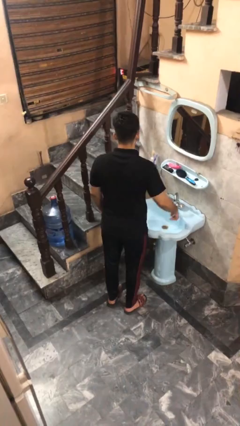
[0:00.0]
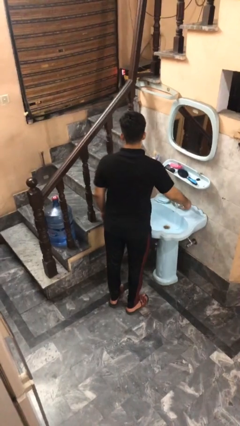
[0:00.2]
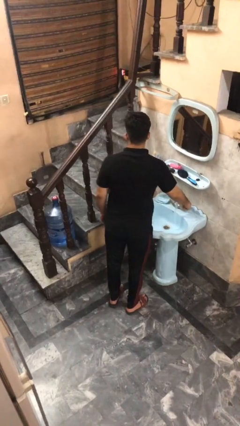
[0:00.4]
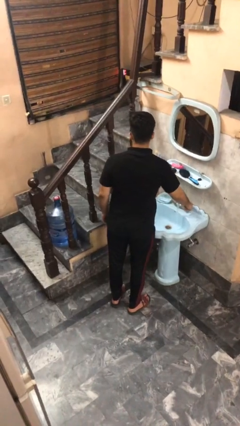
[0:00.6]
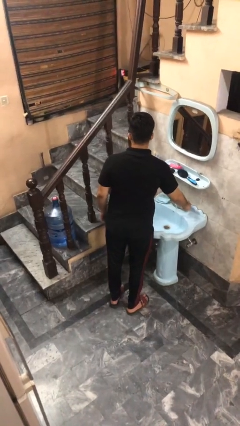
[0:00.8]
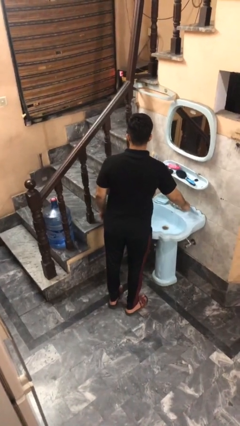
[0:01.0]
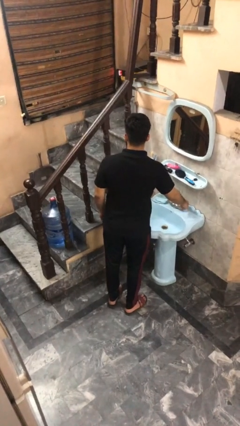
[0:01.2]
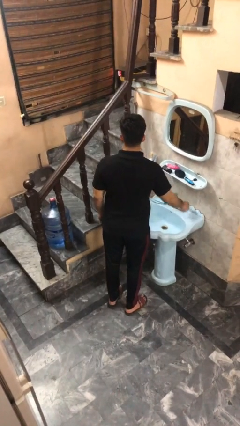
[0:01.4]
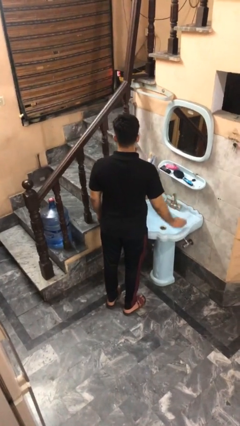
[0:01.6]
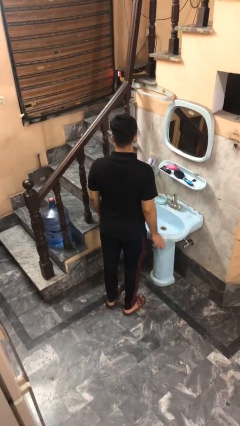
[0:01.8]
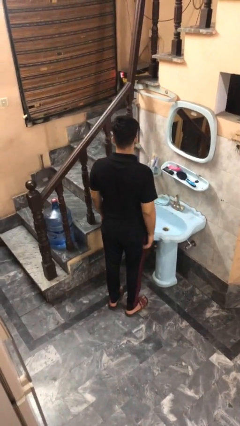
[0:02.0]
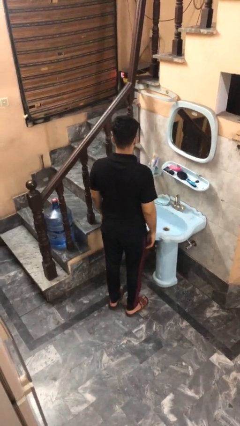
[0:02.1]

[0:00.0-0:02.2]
person turns off faucet

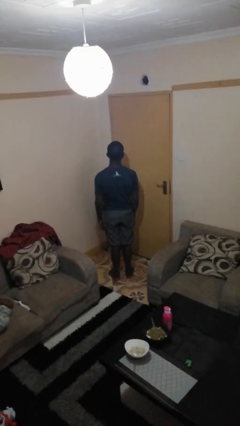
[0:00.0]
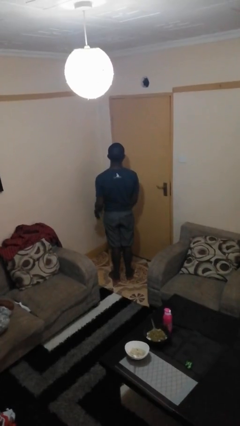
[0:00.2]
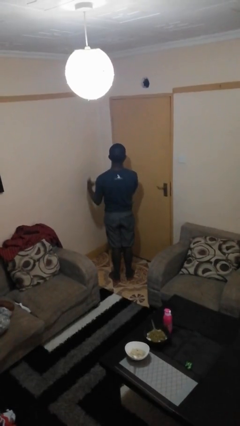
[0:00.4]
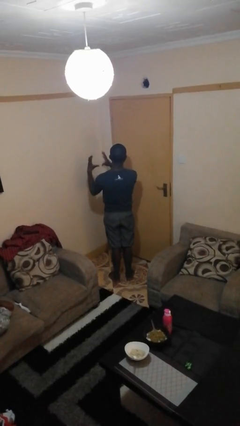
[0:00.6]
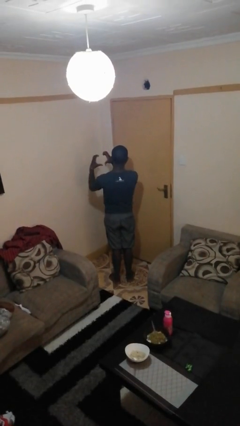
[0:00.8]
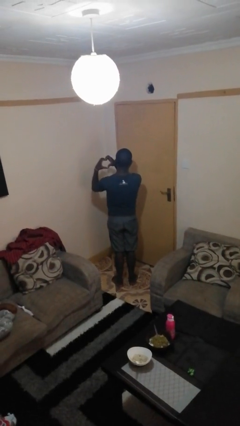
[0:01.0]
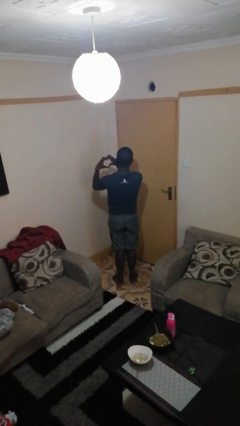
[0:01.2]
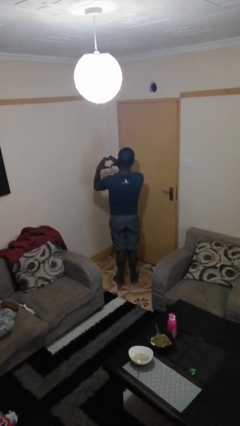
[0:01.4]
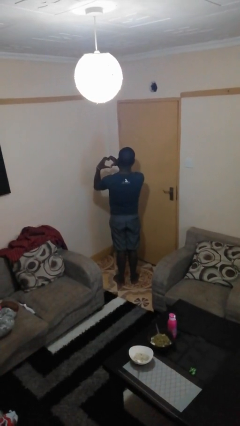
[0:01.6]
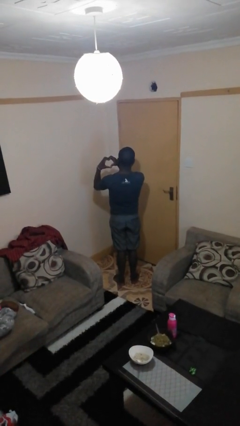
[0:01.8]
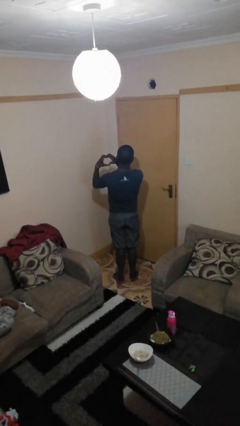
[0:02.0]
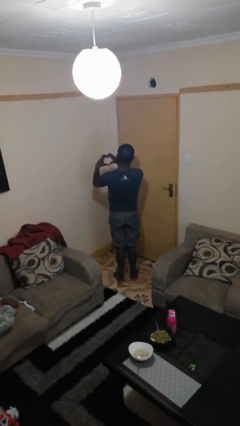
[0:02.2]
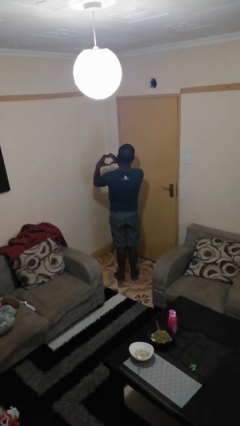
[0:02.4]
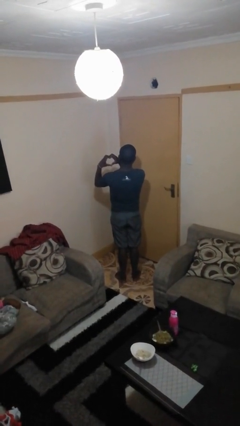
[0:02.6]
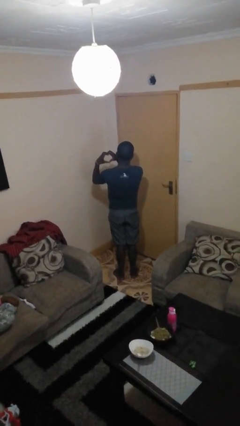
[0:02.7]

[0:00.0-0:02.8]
person gestures heart

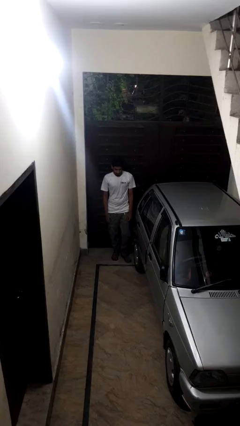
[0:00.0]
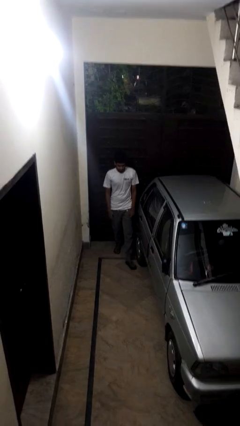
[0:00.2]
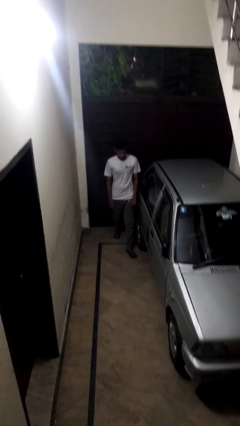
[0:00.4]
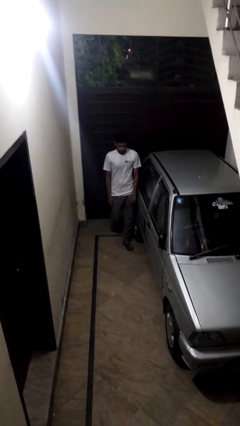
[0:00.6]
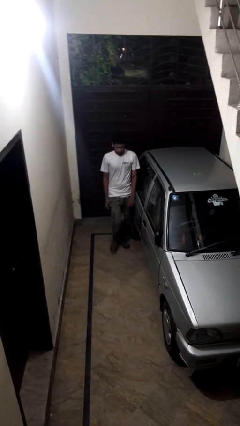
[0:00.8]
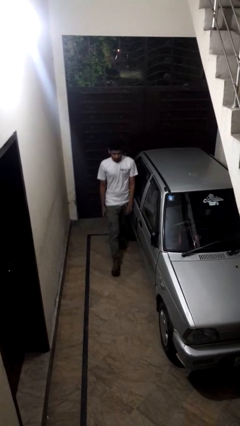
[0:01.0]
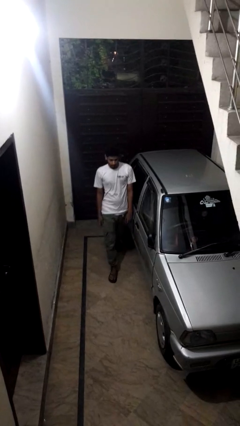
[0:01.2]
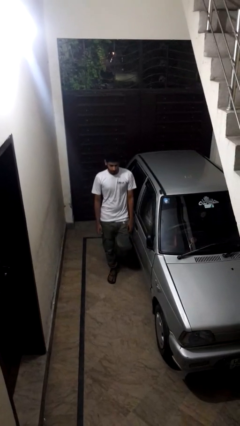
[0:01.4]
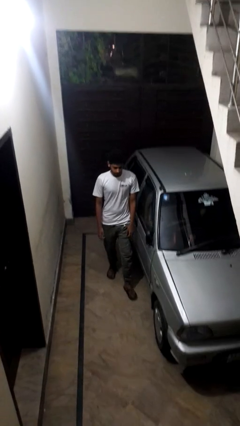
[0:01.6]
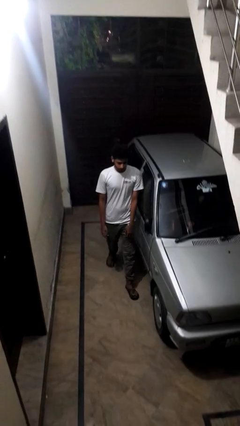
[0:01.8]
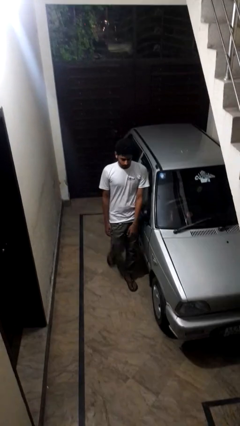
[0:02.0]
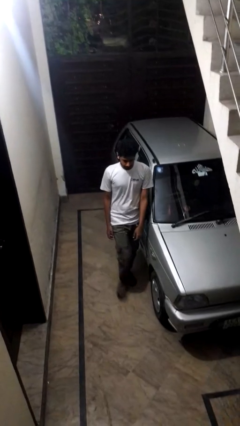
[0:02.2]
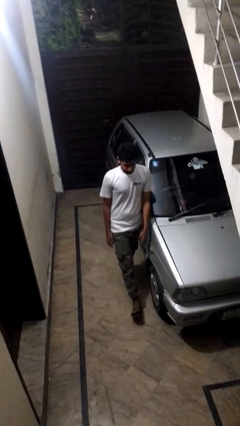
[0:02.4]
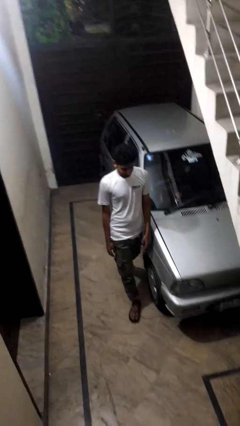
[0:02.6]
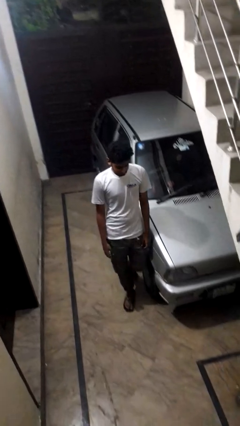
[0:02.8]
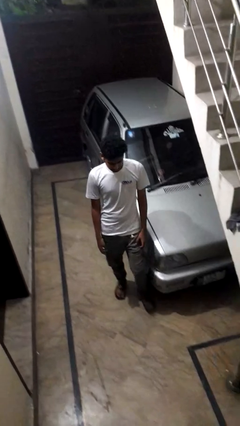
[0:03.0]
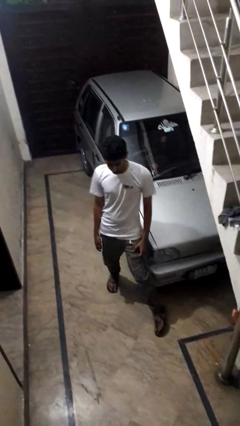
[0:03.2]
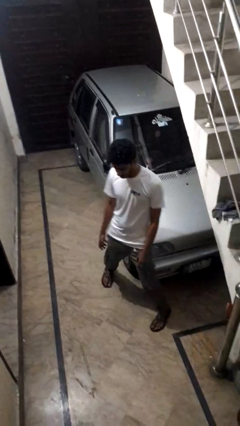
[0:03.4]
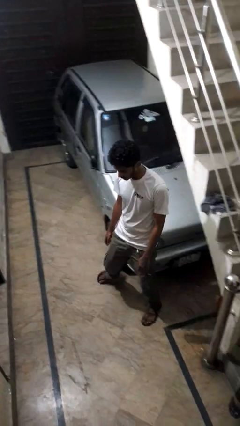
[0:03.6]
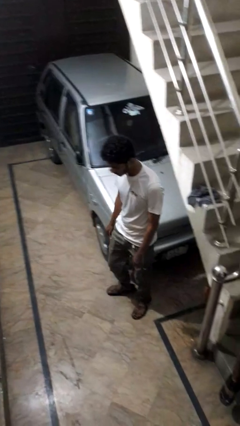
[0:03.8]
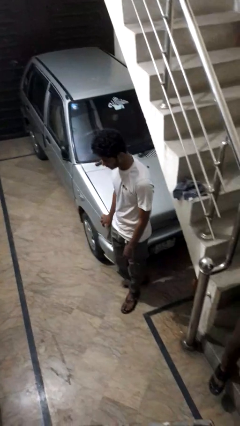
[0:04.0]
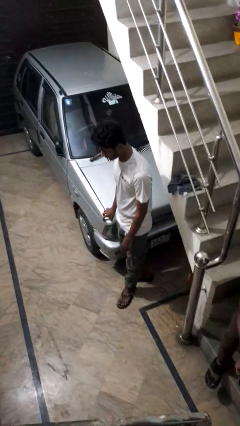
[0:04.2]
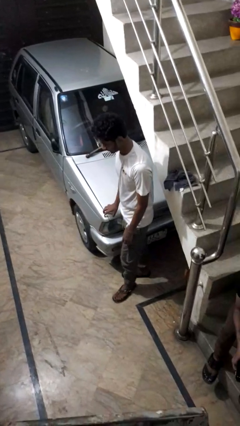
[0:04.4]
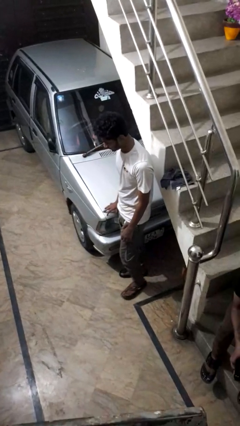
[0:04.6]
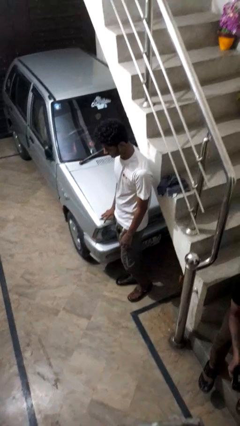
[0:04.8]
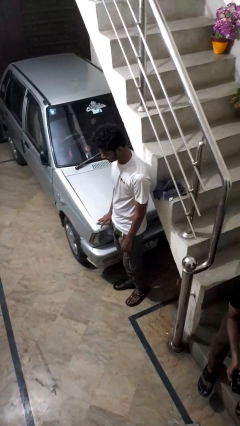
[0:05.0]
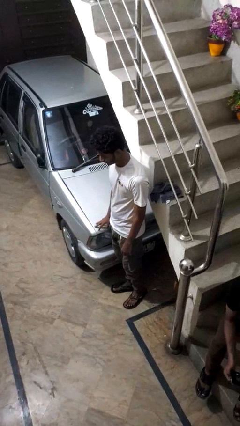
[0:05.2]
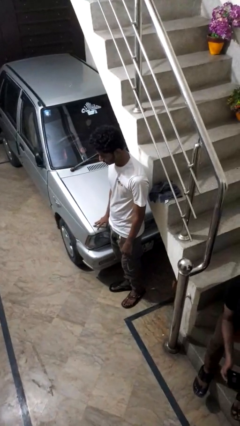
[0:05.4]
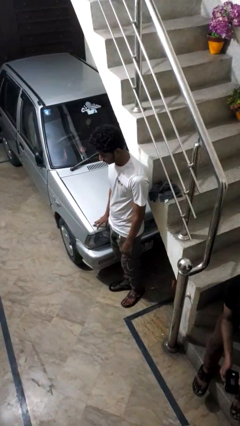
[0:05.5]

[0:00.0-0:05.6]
person walks around car

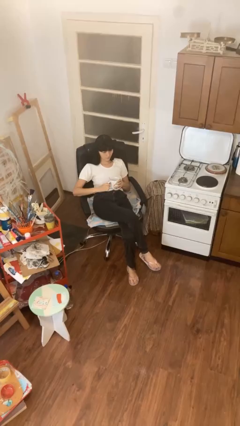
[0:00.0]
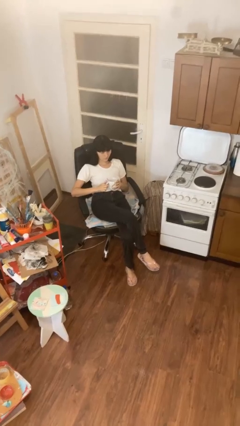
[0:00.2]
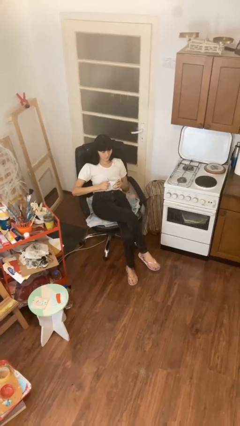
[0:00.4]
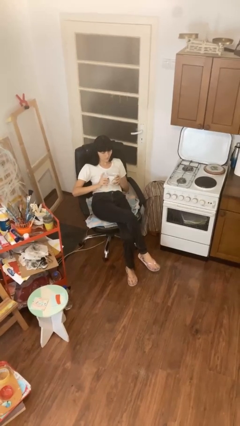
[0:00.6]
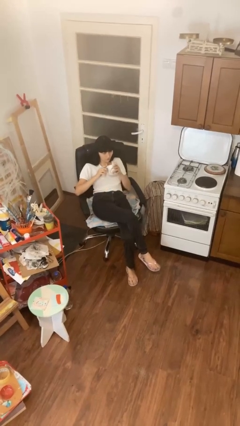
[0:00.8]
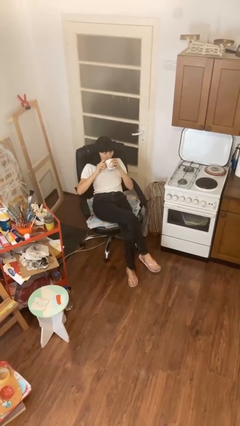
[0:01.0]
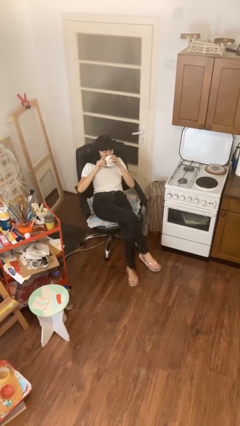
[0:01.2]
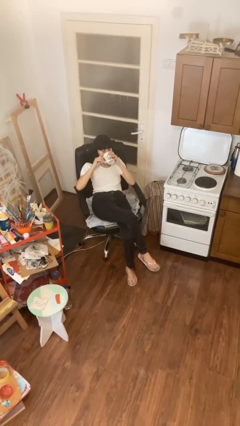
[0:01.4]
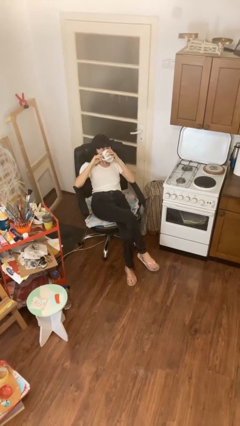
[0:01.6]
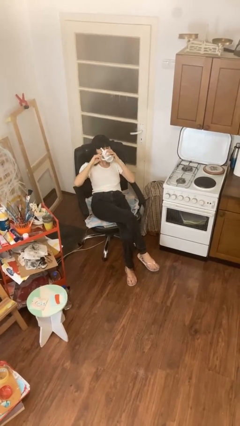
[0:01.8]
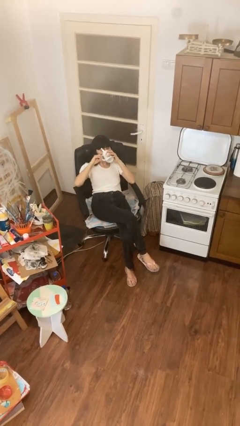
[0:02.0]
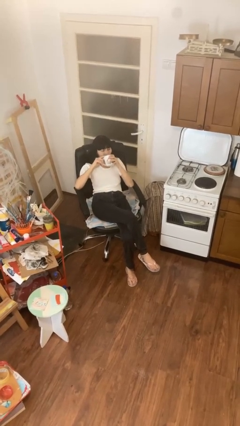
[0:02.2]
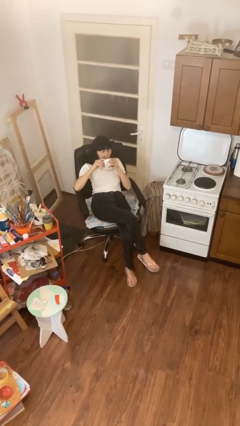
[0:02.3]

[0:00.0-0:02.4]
person drinks from mug

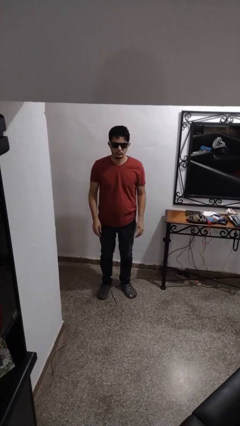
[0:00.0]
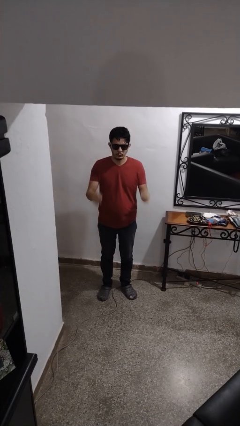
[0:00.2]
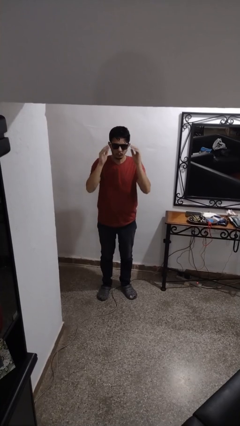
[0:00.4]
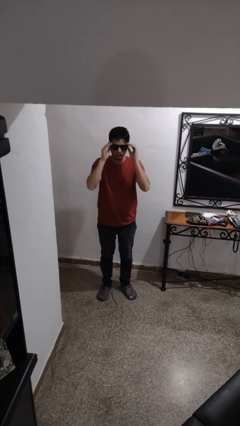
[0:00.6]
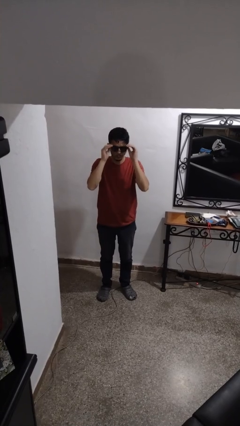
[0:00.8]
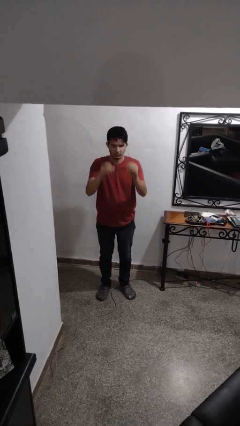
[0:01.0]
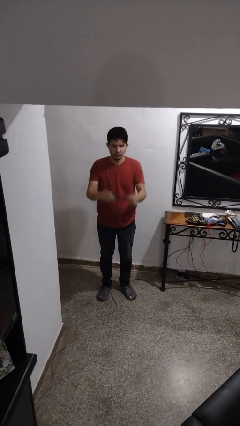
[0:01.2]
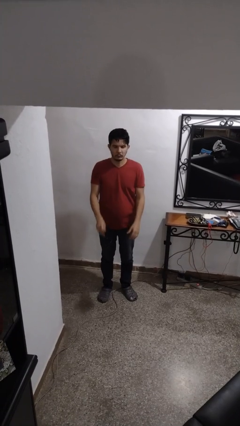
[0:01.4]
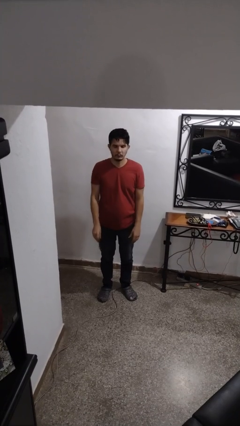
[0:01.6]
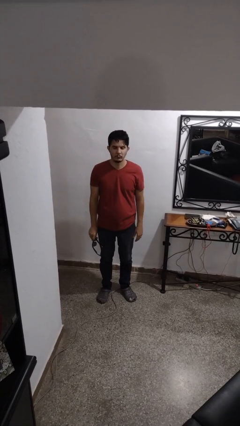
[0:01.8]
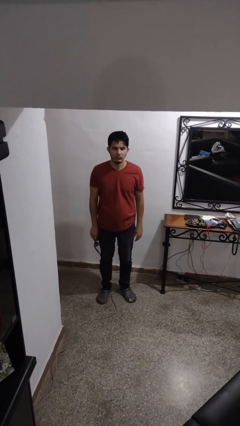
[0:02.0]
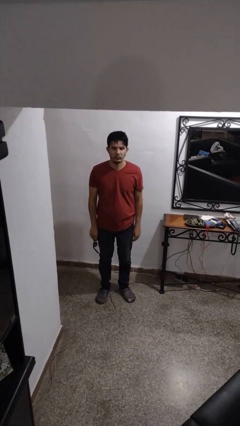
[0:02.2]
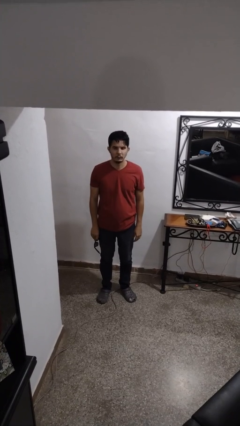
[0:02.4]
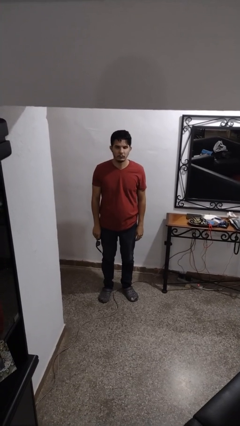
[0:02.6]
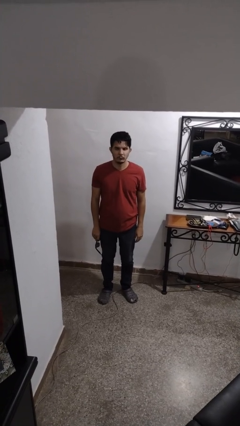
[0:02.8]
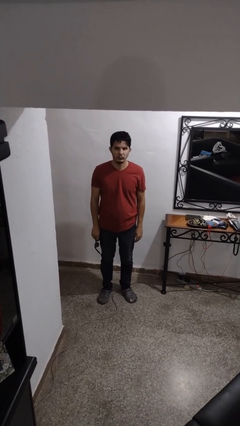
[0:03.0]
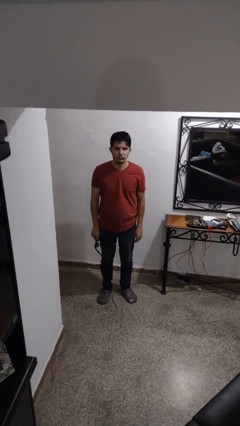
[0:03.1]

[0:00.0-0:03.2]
person takes off sunglasses

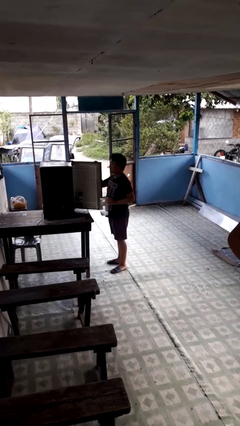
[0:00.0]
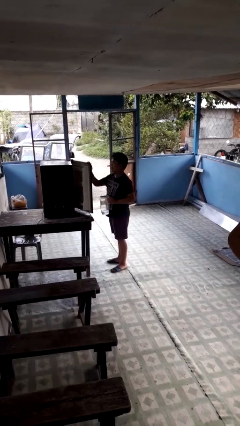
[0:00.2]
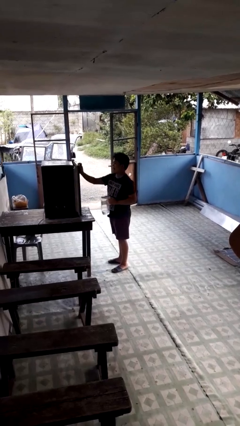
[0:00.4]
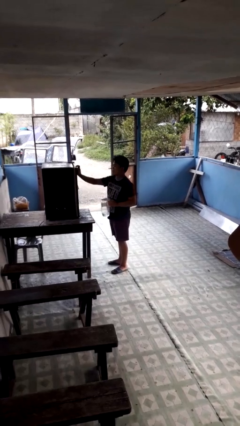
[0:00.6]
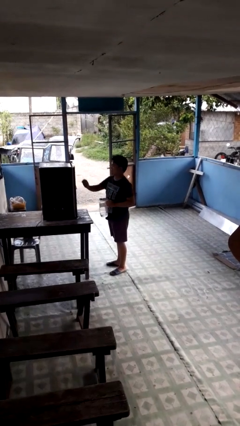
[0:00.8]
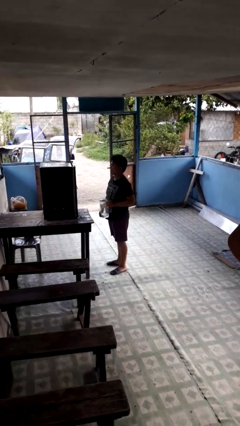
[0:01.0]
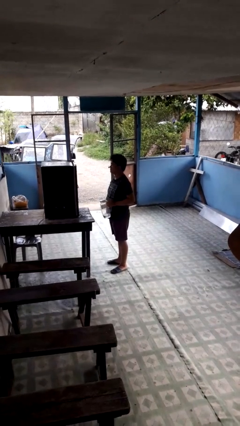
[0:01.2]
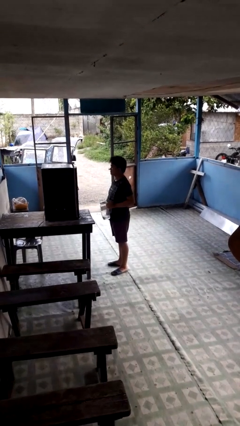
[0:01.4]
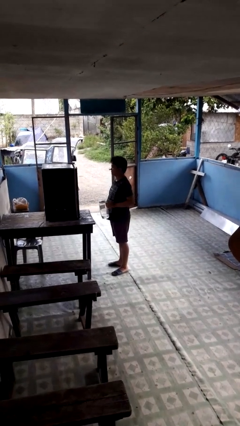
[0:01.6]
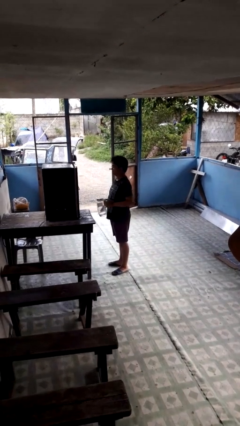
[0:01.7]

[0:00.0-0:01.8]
person closes refrigerator
